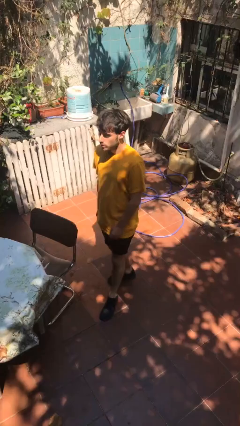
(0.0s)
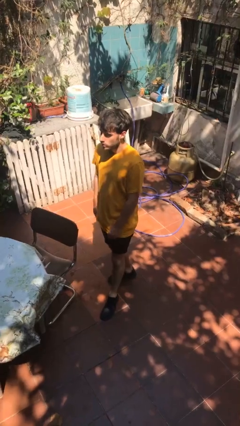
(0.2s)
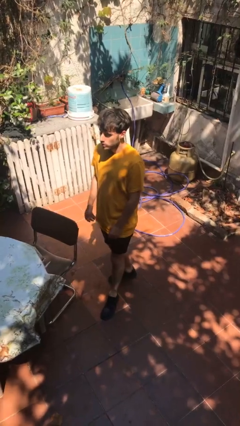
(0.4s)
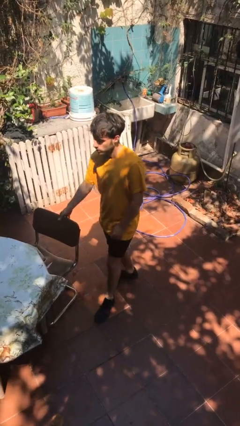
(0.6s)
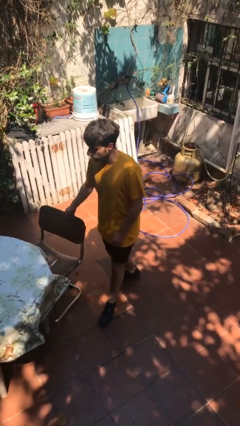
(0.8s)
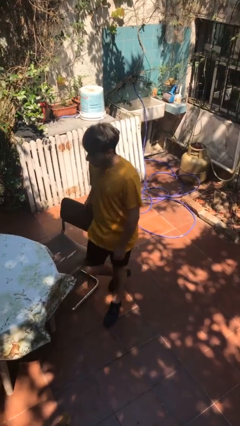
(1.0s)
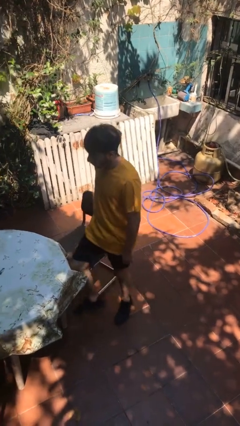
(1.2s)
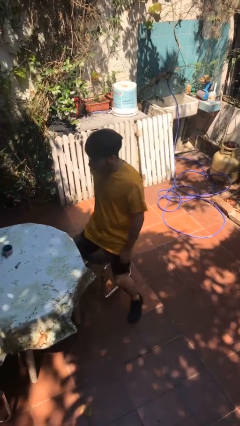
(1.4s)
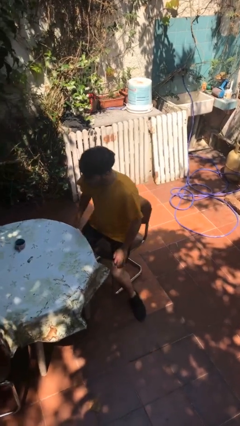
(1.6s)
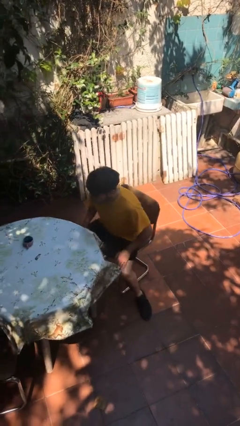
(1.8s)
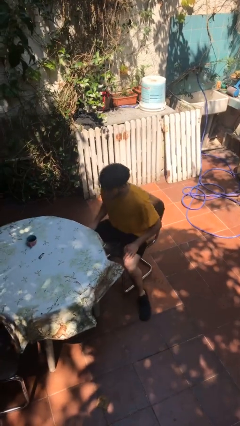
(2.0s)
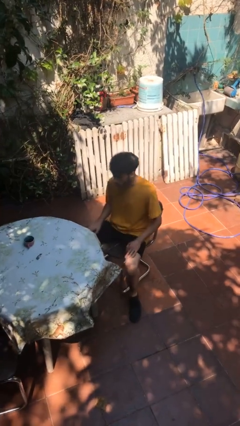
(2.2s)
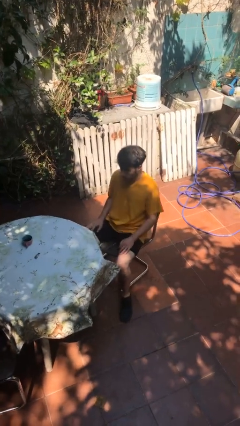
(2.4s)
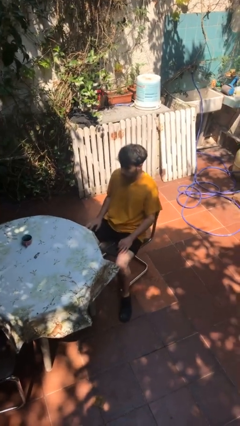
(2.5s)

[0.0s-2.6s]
person sits down

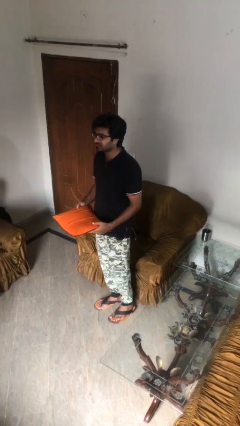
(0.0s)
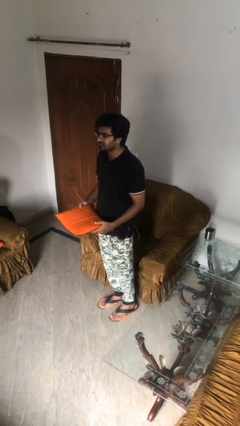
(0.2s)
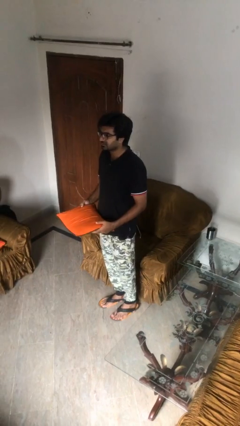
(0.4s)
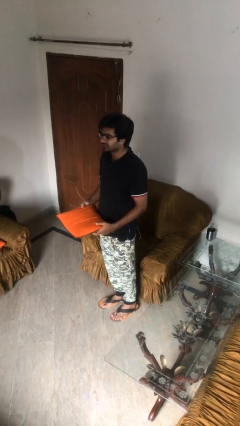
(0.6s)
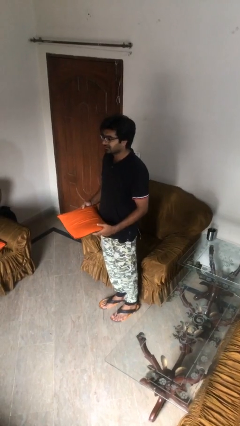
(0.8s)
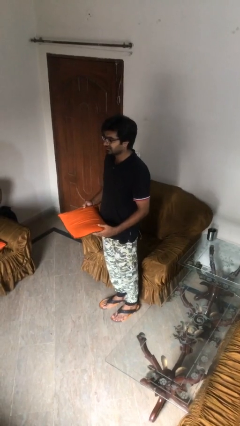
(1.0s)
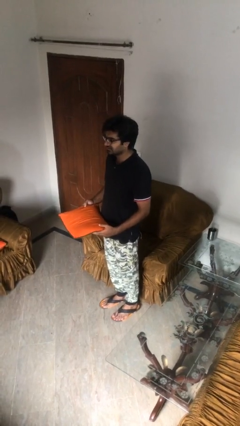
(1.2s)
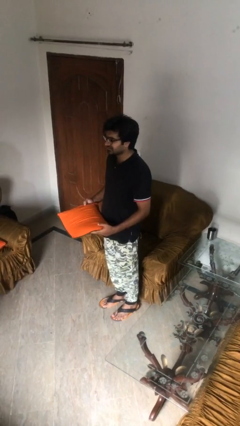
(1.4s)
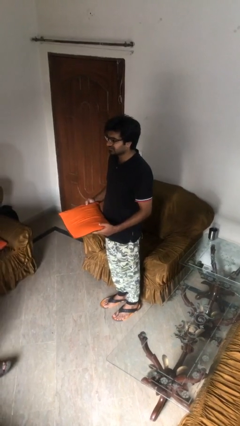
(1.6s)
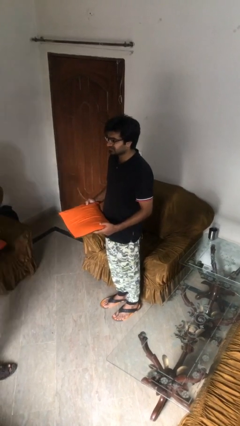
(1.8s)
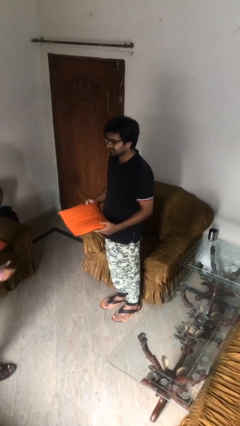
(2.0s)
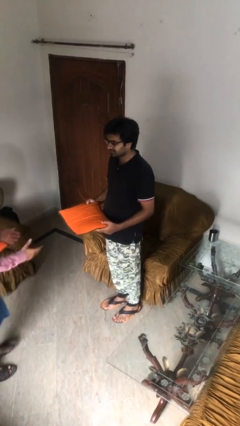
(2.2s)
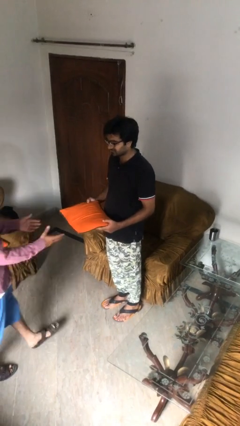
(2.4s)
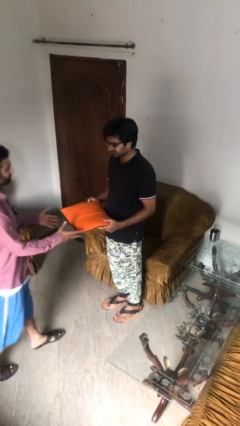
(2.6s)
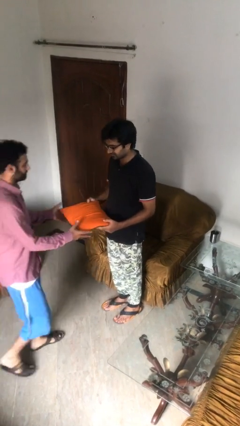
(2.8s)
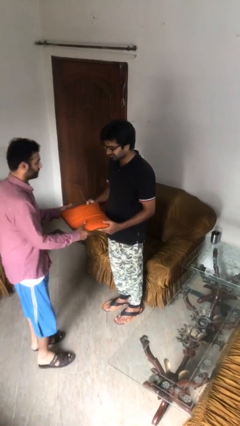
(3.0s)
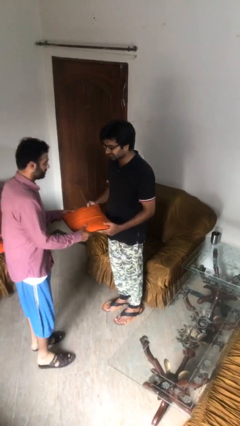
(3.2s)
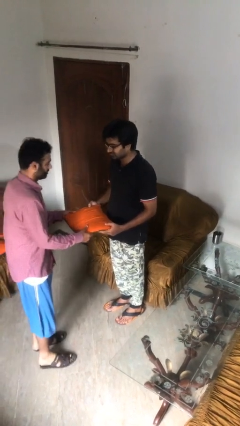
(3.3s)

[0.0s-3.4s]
person transfers object to person

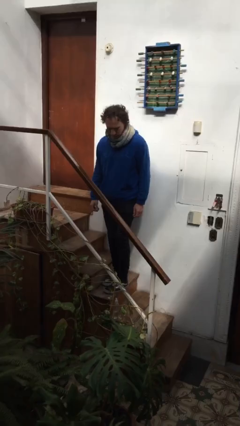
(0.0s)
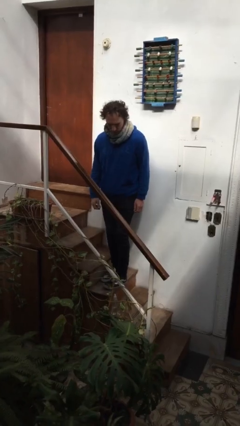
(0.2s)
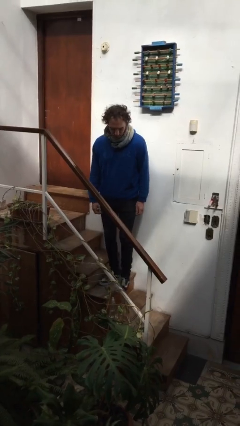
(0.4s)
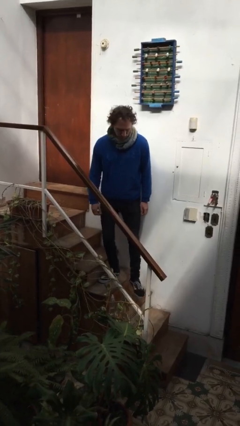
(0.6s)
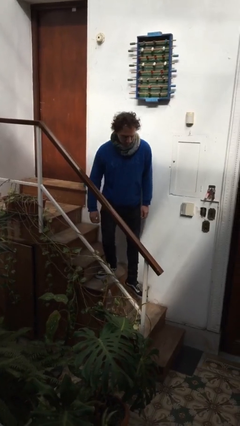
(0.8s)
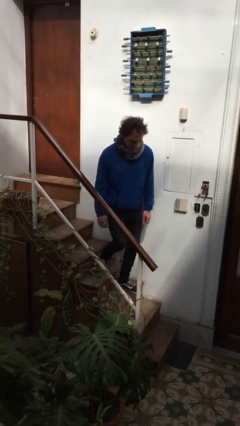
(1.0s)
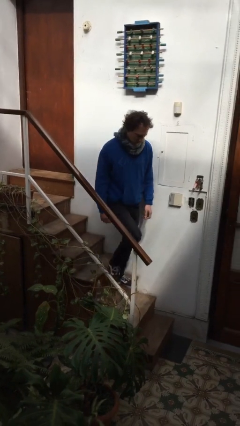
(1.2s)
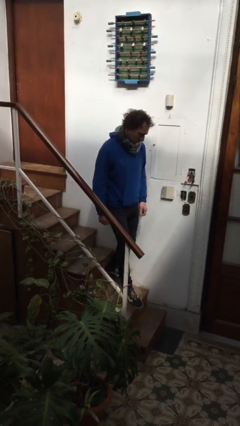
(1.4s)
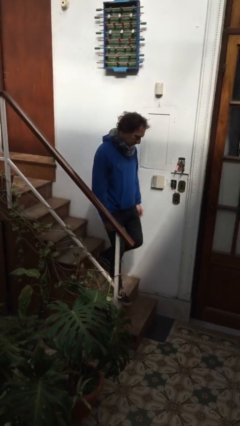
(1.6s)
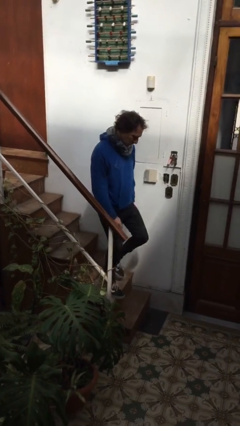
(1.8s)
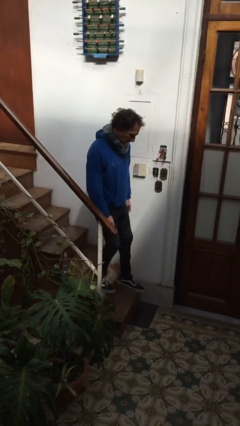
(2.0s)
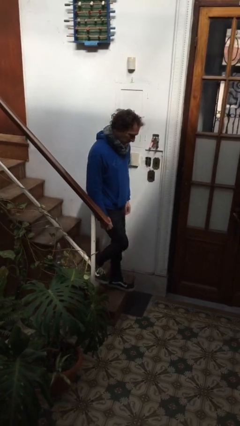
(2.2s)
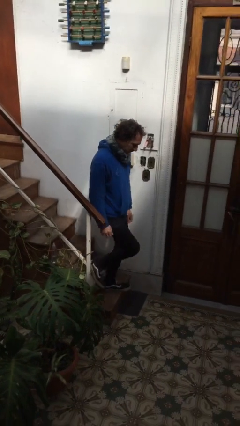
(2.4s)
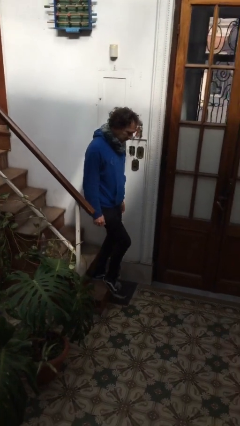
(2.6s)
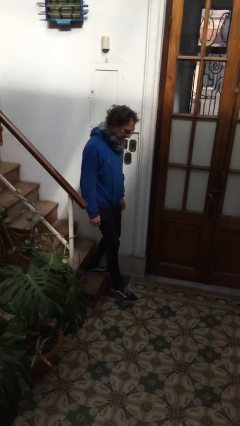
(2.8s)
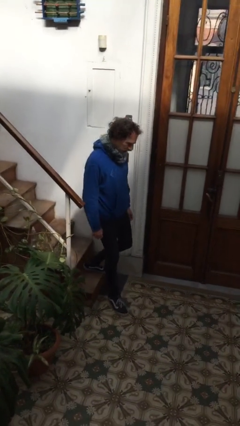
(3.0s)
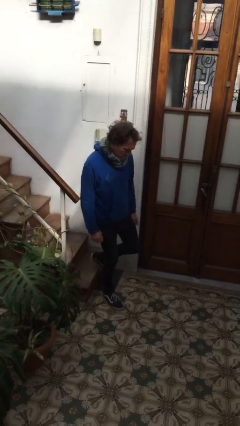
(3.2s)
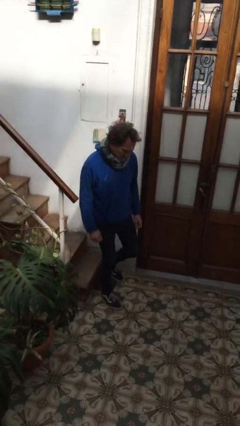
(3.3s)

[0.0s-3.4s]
person climbs down stairs

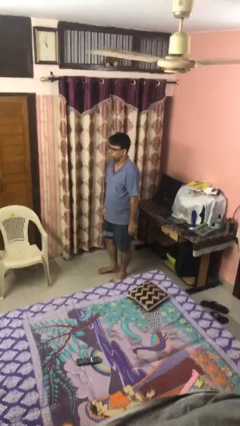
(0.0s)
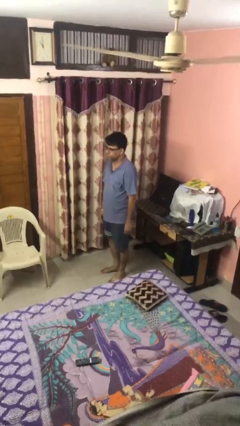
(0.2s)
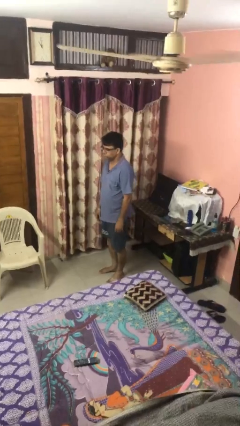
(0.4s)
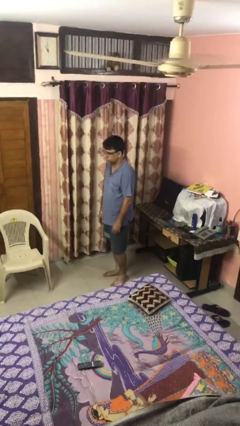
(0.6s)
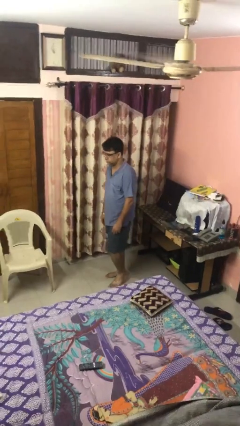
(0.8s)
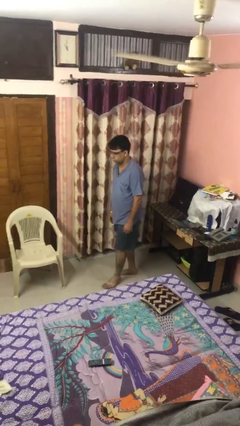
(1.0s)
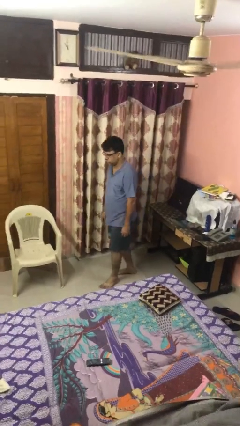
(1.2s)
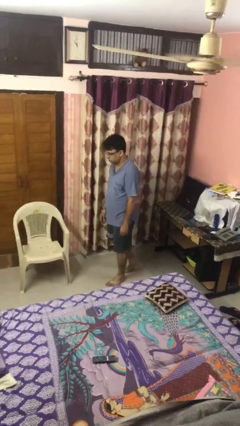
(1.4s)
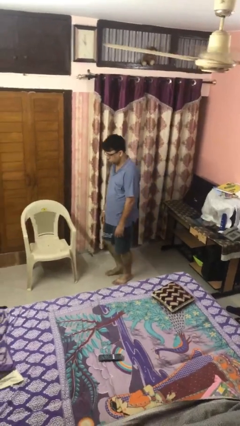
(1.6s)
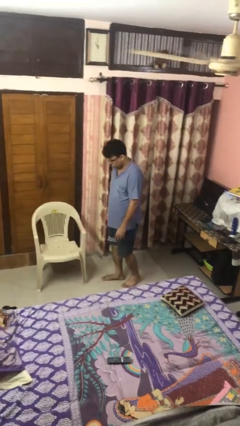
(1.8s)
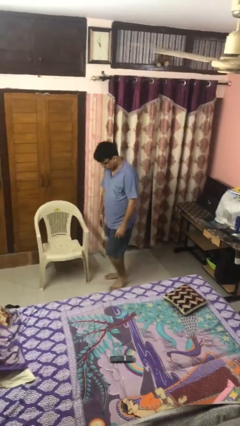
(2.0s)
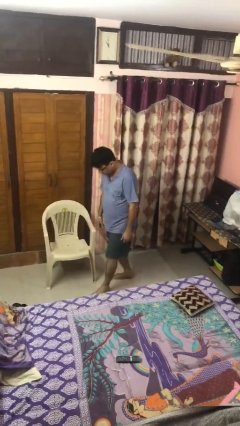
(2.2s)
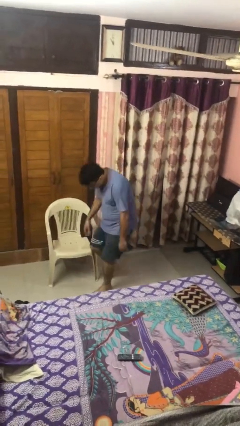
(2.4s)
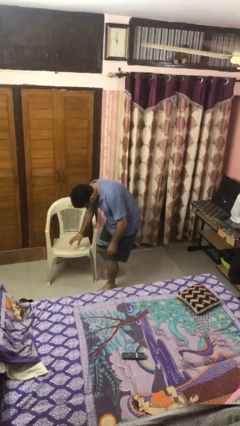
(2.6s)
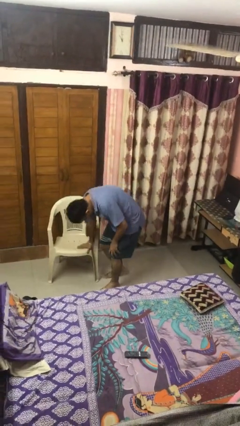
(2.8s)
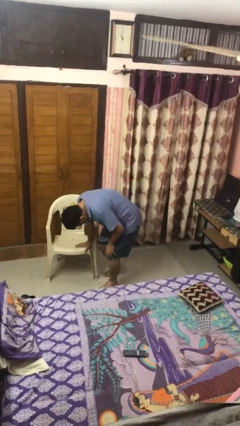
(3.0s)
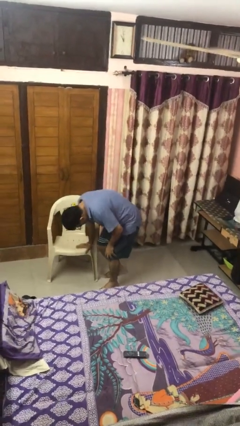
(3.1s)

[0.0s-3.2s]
person stubs toe

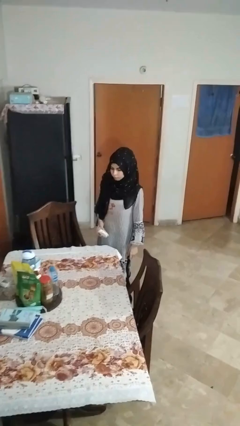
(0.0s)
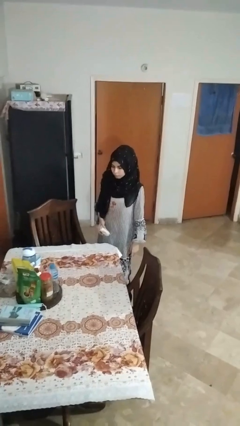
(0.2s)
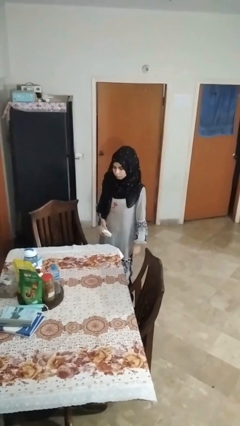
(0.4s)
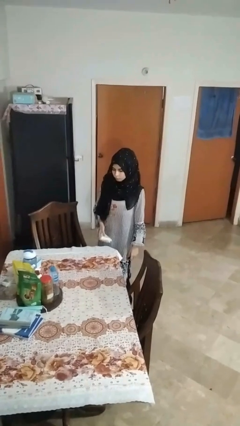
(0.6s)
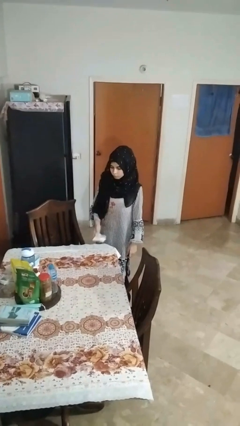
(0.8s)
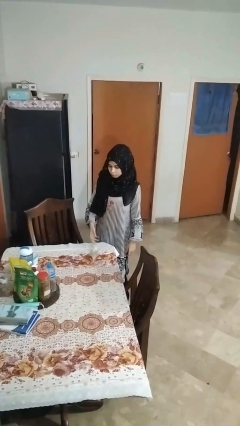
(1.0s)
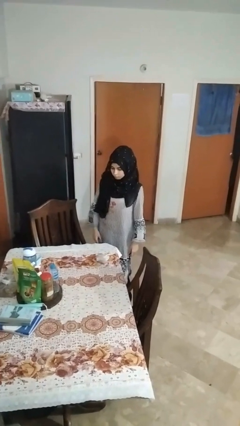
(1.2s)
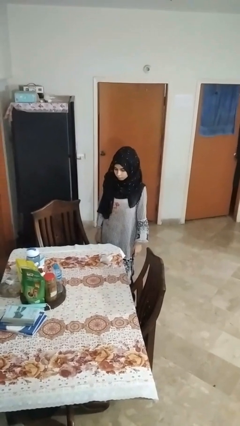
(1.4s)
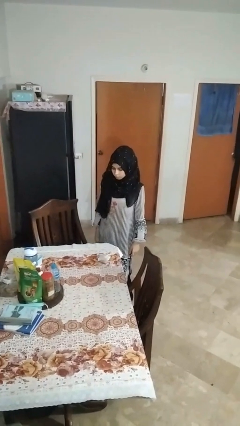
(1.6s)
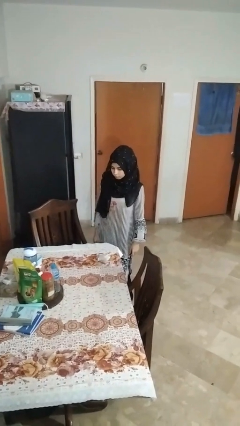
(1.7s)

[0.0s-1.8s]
person throws object on table

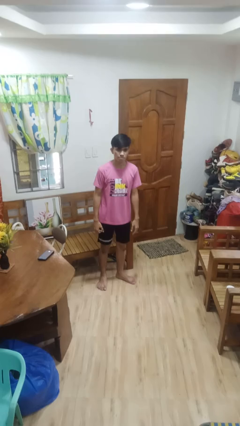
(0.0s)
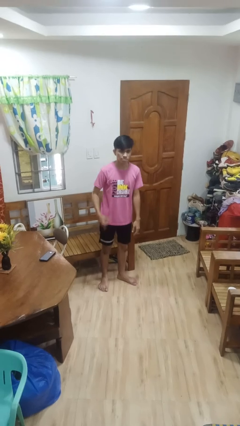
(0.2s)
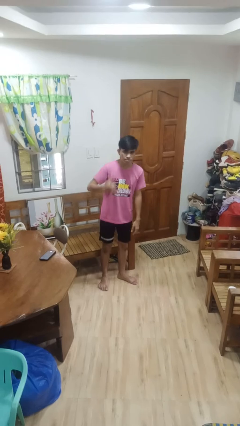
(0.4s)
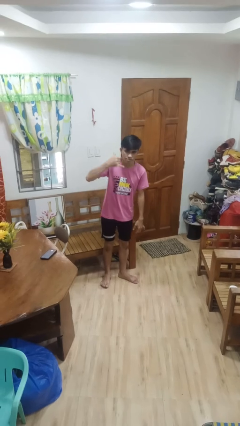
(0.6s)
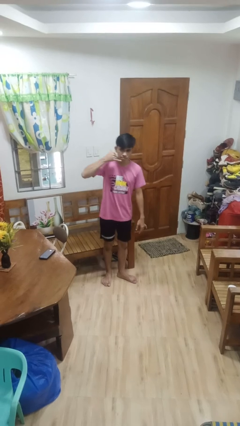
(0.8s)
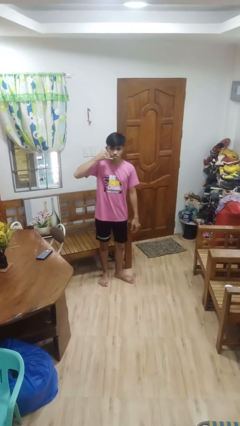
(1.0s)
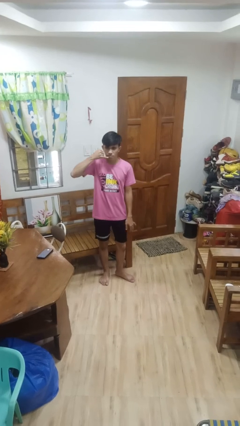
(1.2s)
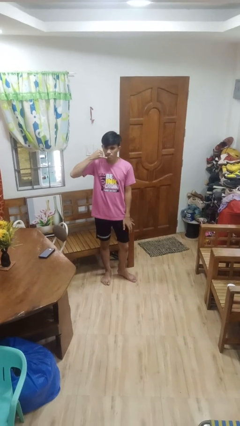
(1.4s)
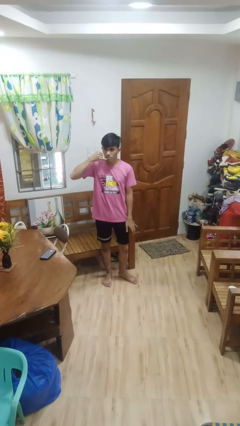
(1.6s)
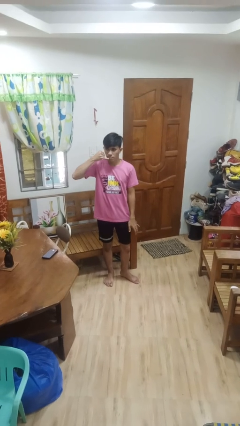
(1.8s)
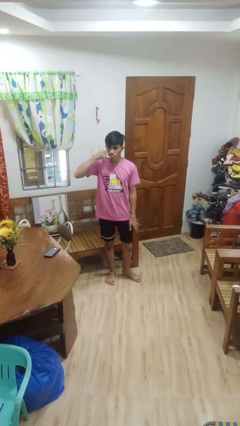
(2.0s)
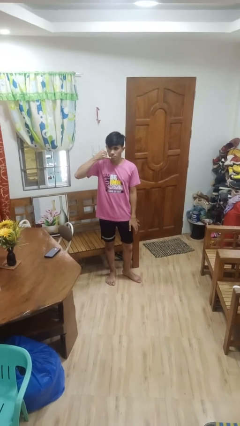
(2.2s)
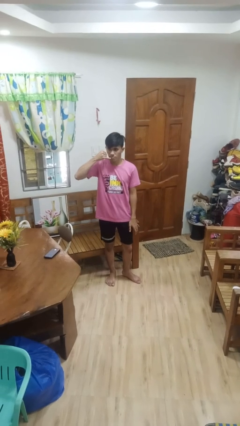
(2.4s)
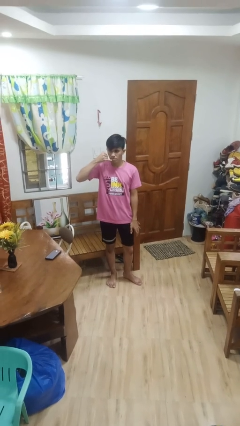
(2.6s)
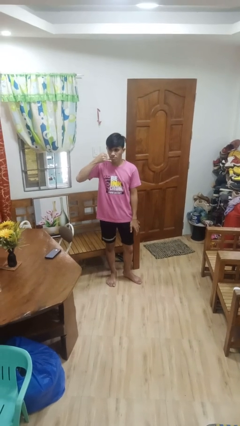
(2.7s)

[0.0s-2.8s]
person gestures call me

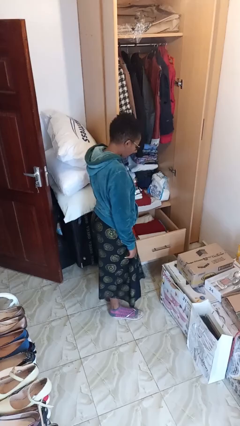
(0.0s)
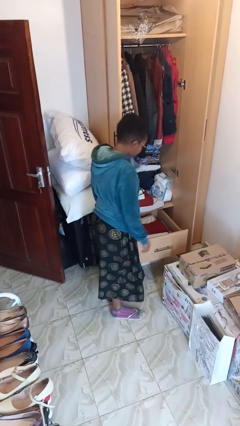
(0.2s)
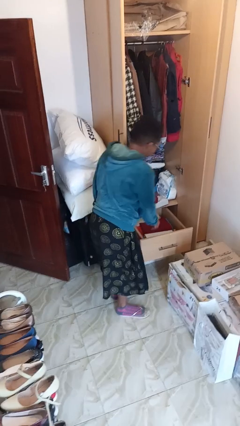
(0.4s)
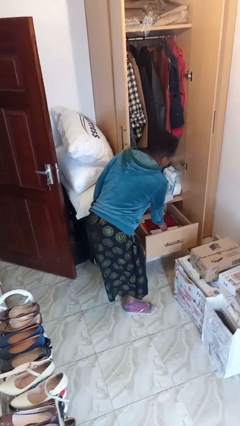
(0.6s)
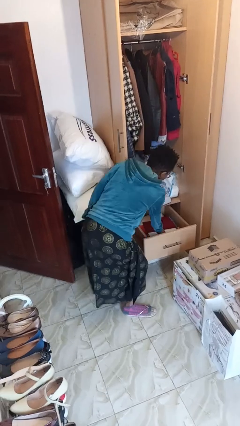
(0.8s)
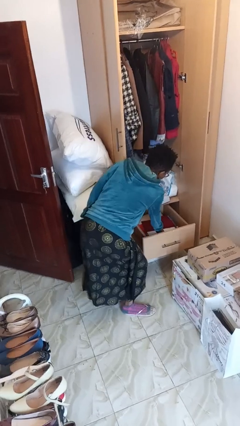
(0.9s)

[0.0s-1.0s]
person takes clothes from dresser
